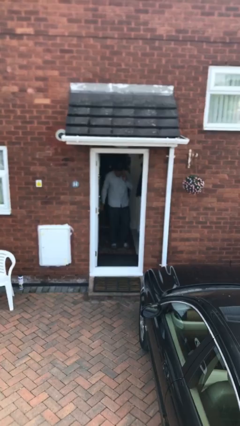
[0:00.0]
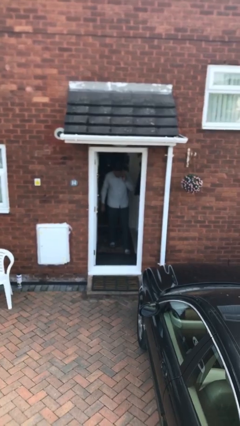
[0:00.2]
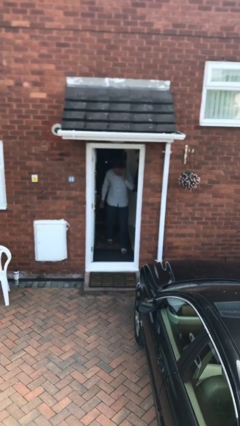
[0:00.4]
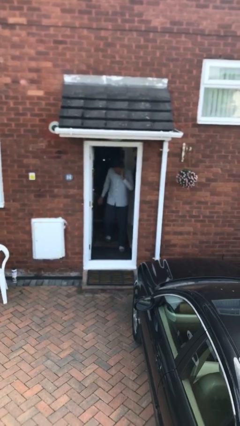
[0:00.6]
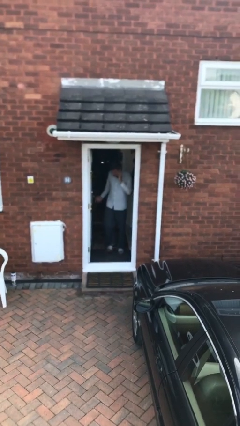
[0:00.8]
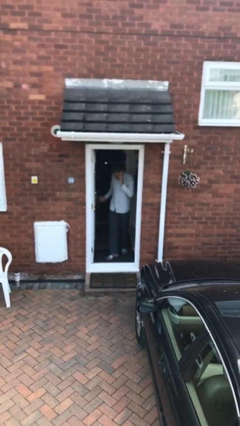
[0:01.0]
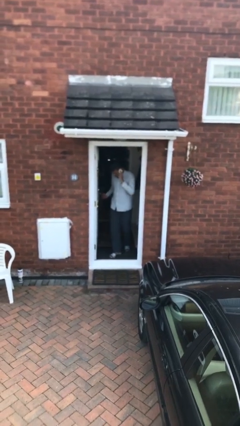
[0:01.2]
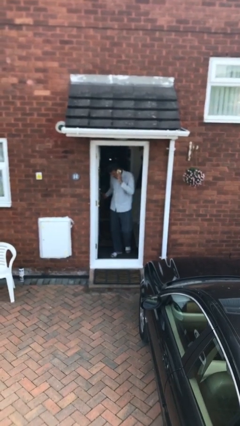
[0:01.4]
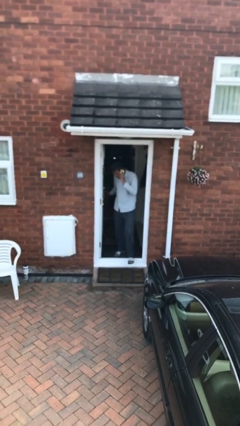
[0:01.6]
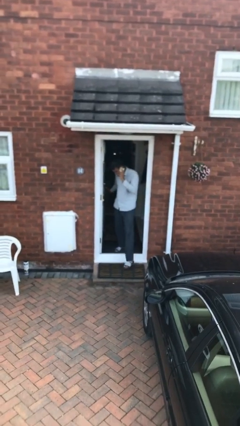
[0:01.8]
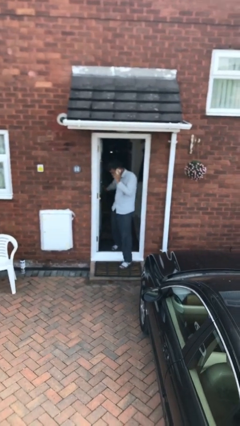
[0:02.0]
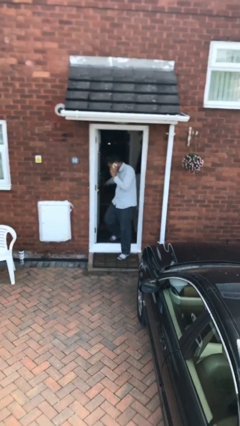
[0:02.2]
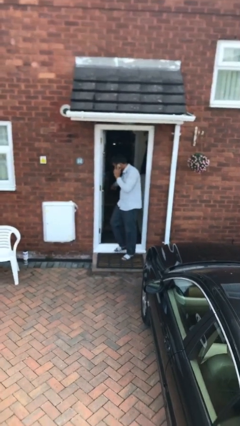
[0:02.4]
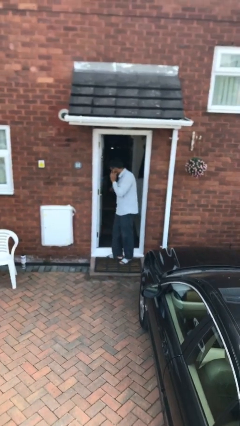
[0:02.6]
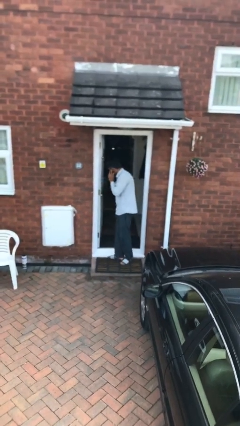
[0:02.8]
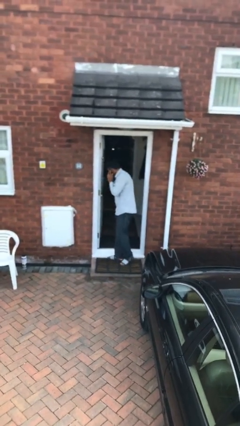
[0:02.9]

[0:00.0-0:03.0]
person enters scene through structure

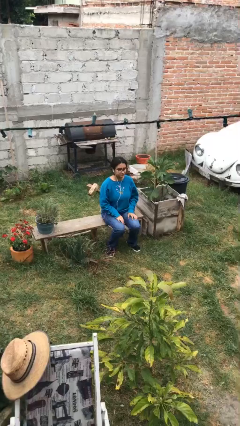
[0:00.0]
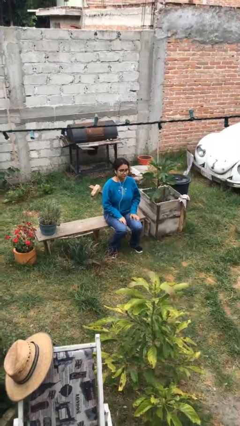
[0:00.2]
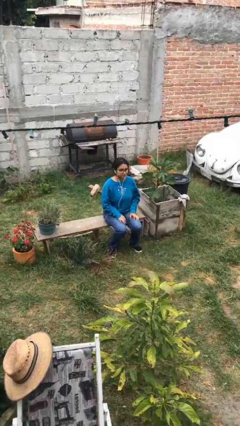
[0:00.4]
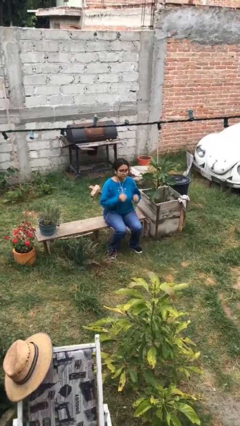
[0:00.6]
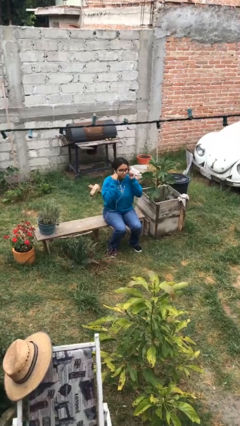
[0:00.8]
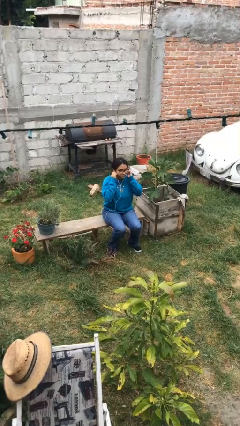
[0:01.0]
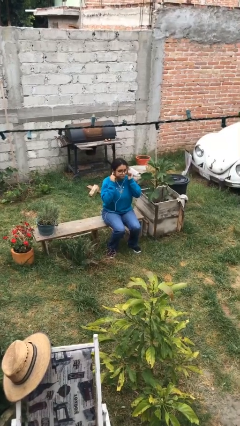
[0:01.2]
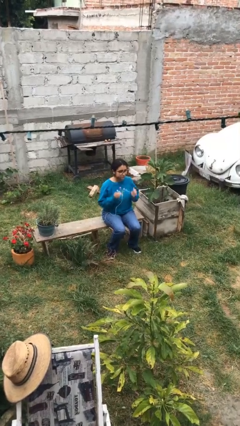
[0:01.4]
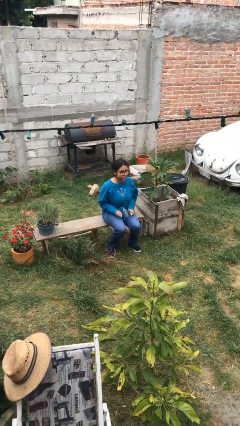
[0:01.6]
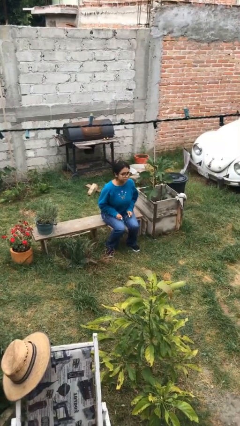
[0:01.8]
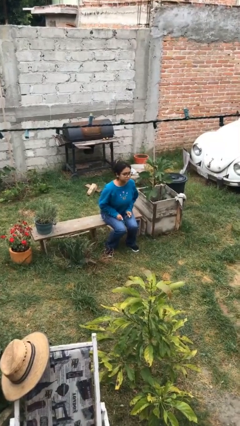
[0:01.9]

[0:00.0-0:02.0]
person takes off headphones

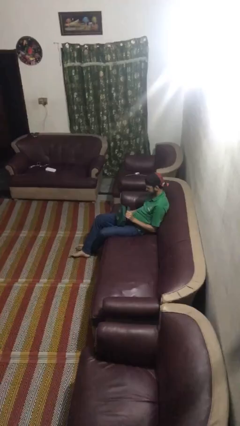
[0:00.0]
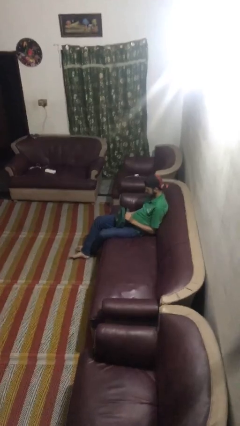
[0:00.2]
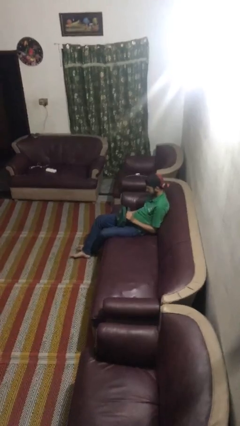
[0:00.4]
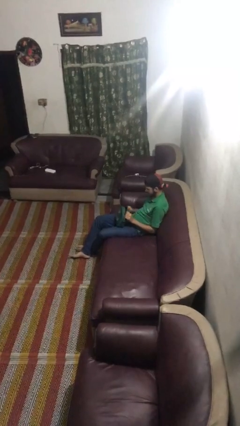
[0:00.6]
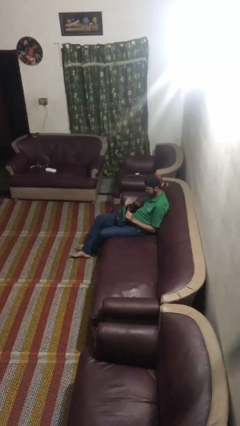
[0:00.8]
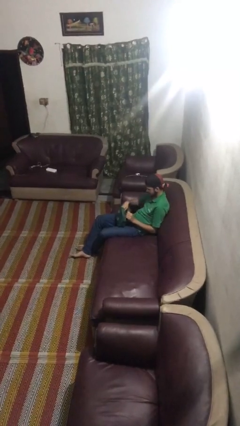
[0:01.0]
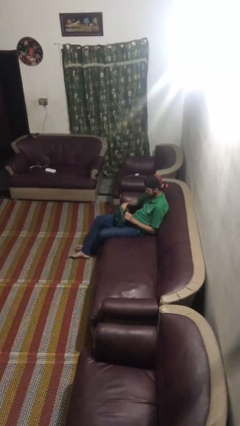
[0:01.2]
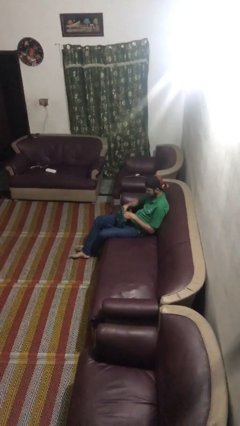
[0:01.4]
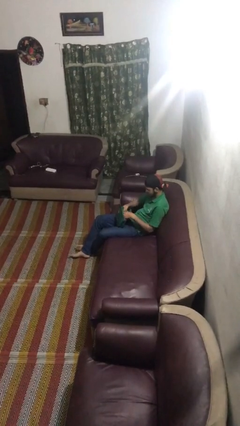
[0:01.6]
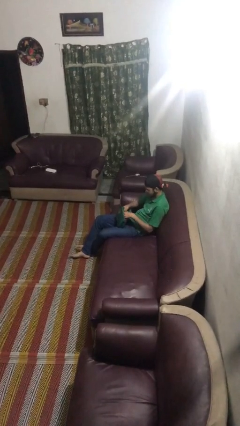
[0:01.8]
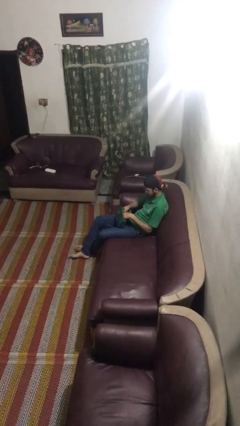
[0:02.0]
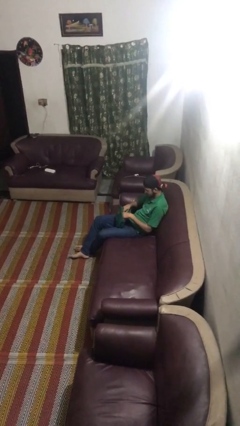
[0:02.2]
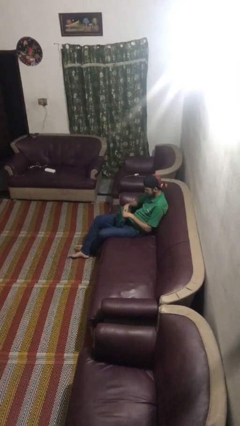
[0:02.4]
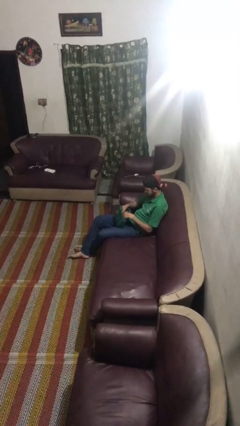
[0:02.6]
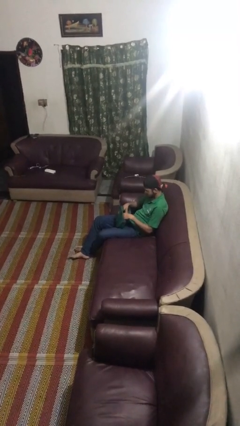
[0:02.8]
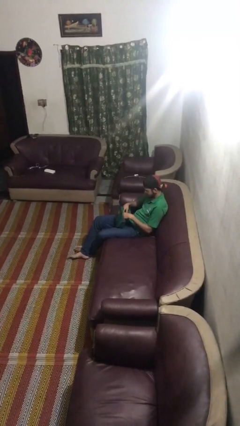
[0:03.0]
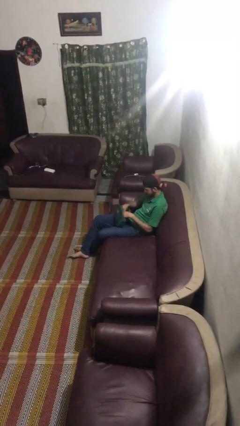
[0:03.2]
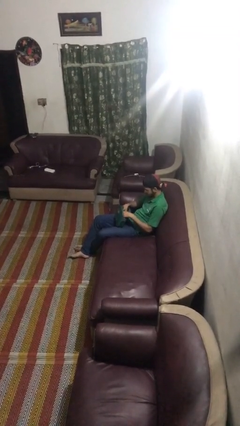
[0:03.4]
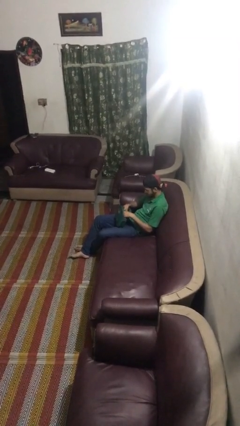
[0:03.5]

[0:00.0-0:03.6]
person searches in purse

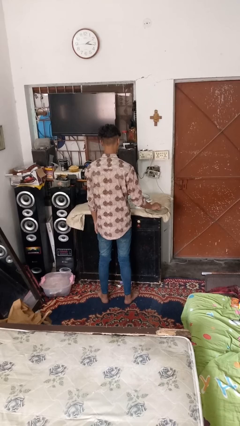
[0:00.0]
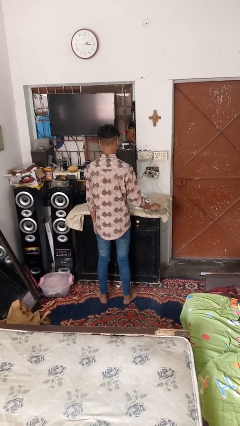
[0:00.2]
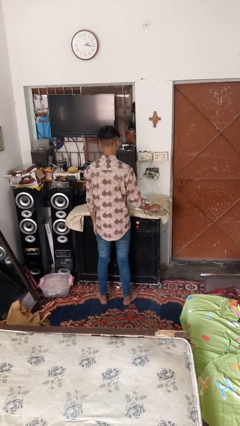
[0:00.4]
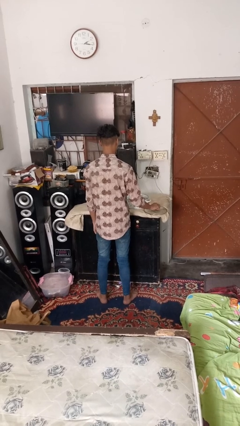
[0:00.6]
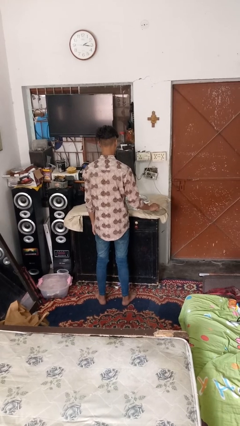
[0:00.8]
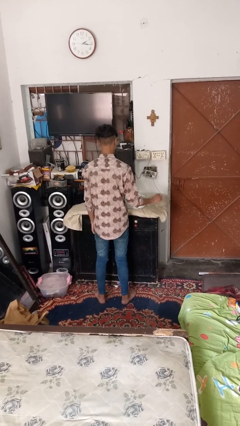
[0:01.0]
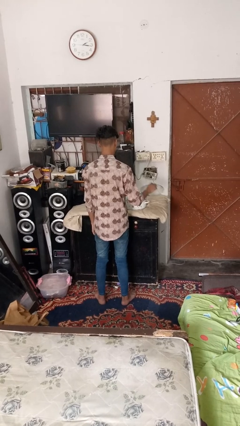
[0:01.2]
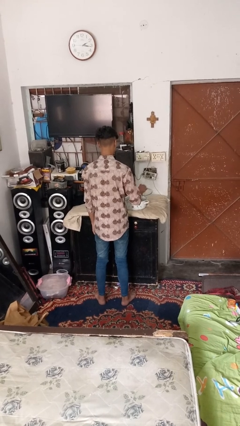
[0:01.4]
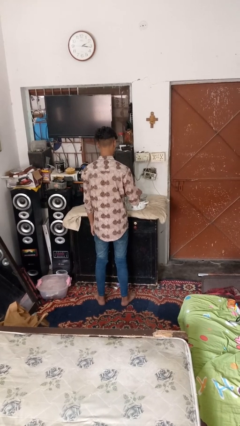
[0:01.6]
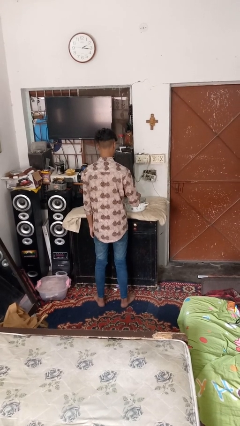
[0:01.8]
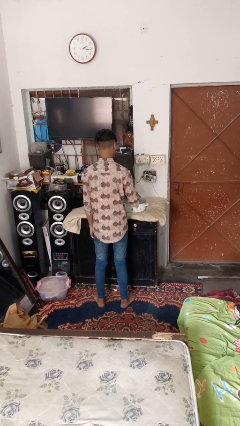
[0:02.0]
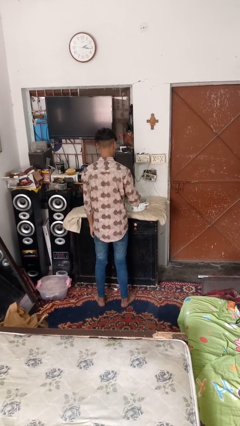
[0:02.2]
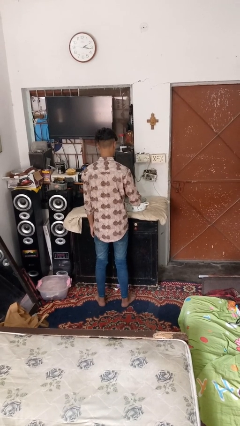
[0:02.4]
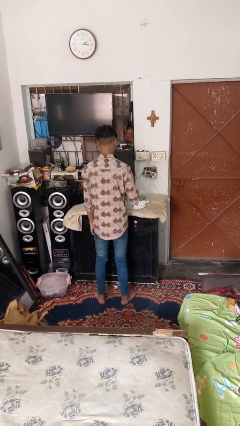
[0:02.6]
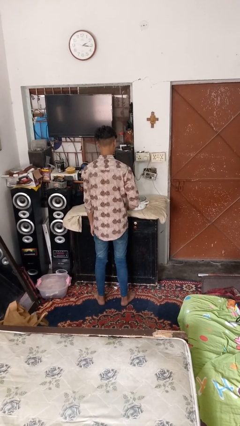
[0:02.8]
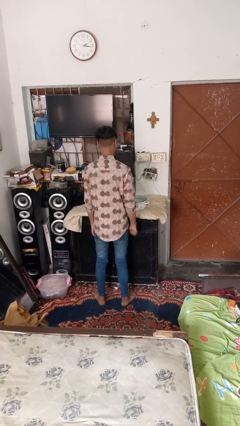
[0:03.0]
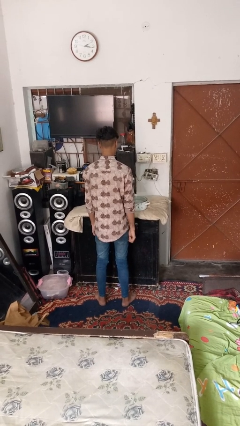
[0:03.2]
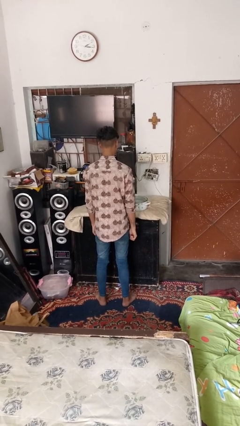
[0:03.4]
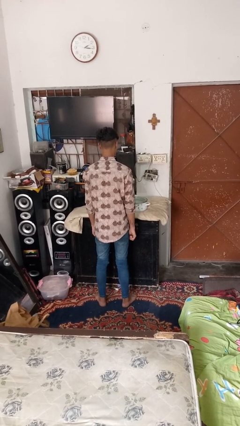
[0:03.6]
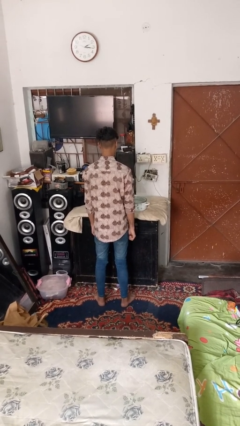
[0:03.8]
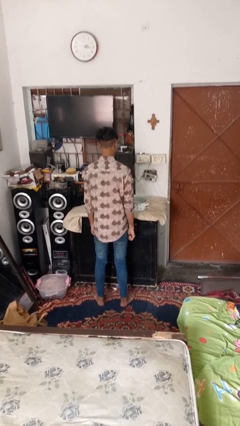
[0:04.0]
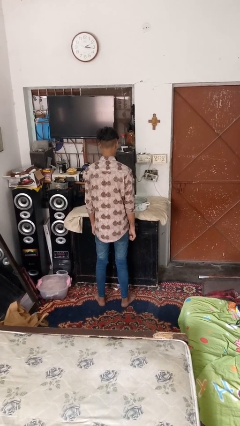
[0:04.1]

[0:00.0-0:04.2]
person closes jar

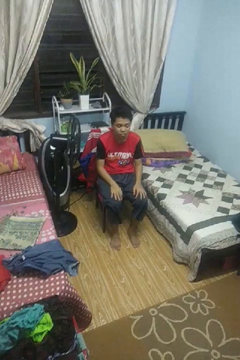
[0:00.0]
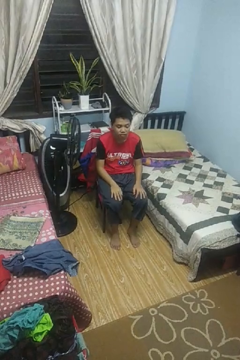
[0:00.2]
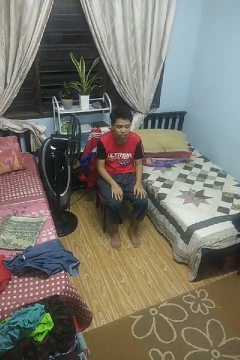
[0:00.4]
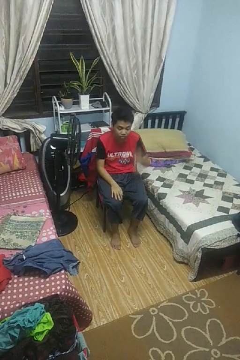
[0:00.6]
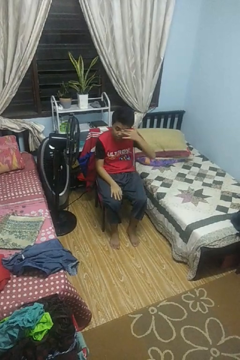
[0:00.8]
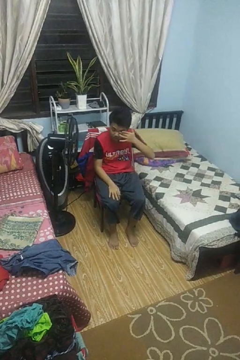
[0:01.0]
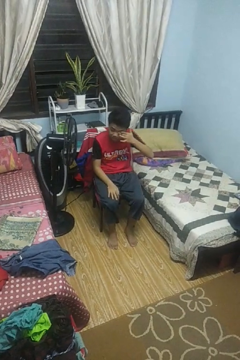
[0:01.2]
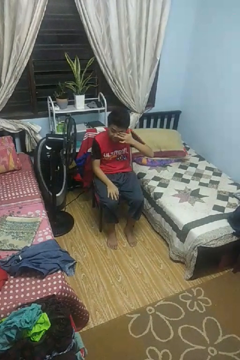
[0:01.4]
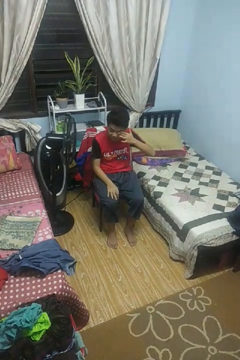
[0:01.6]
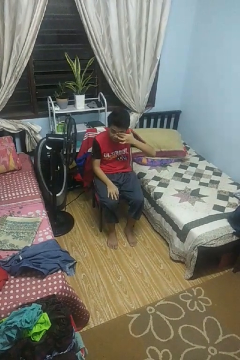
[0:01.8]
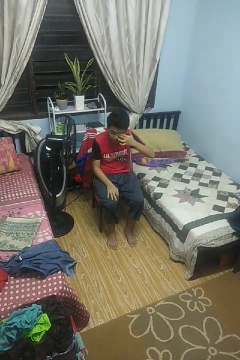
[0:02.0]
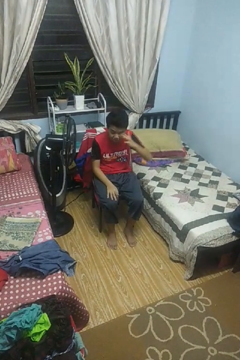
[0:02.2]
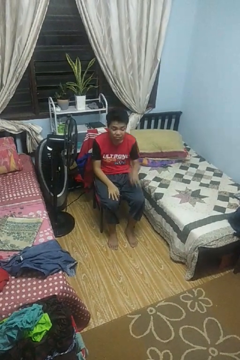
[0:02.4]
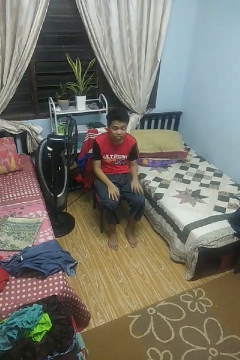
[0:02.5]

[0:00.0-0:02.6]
person rubs eyes

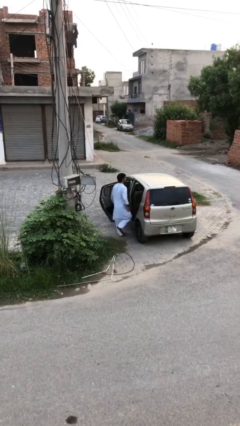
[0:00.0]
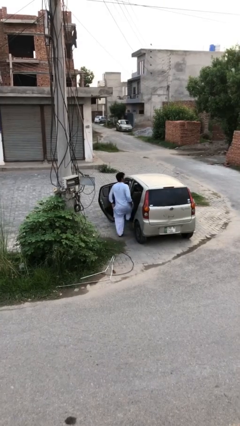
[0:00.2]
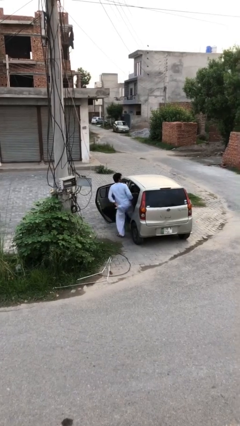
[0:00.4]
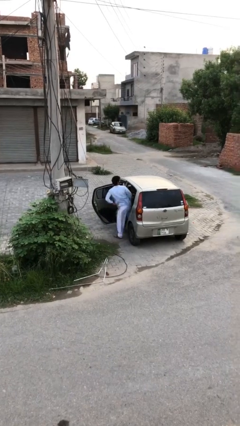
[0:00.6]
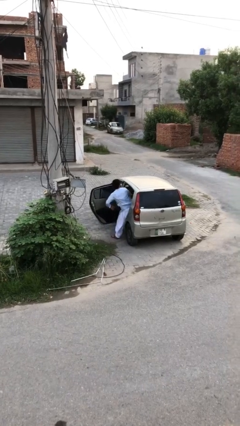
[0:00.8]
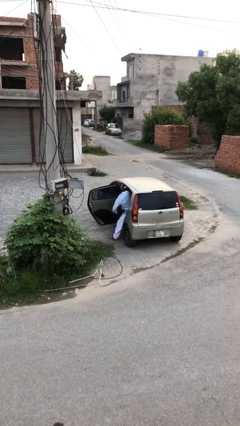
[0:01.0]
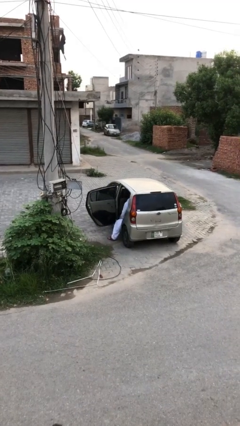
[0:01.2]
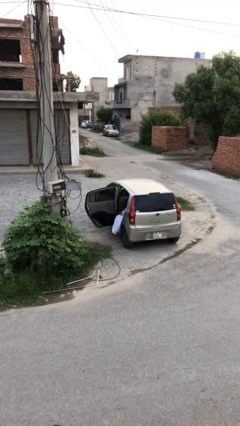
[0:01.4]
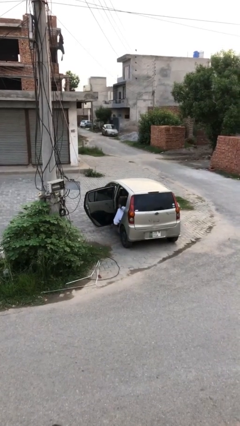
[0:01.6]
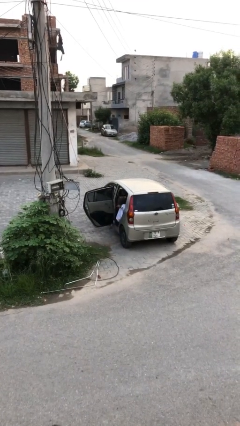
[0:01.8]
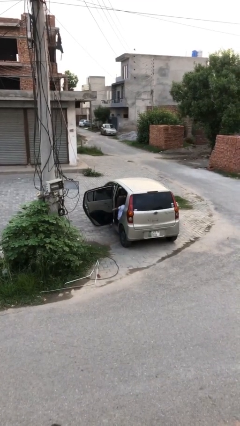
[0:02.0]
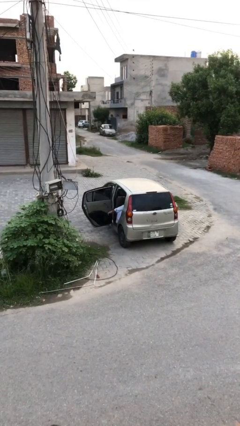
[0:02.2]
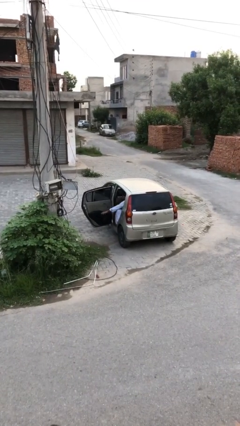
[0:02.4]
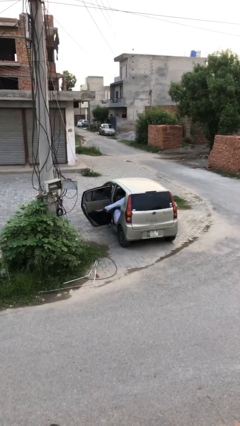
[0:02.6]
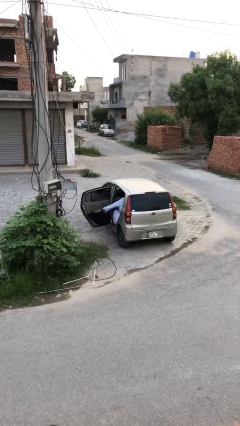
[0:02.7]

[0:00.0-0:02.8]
person enters car
